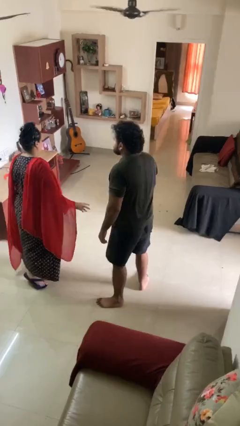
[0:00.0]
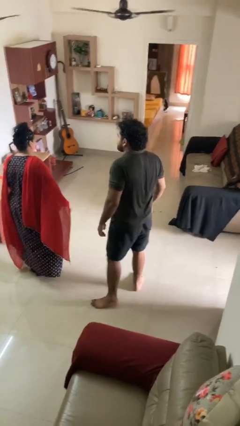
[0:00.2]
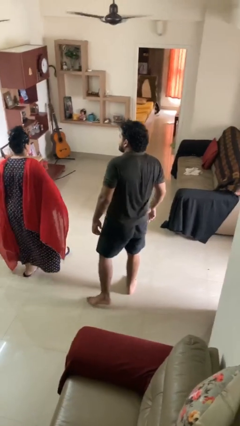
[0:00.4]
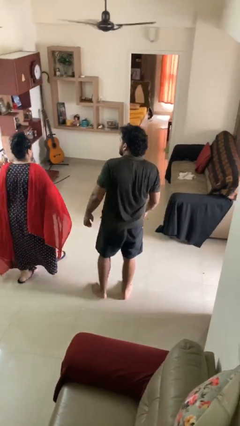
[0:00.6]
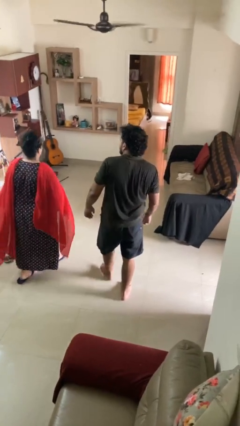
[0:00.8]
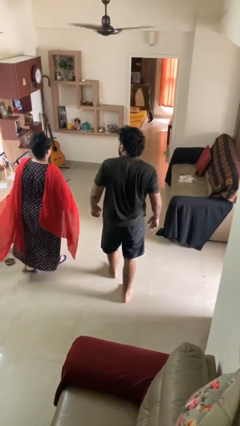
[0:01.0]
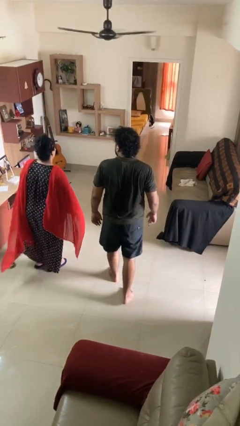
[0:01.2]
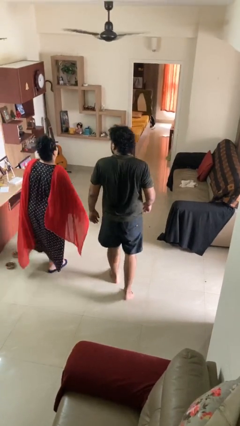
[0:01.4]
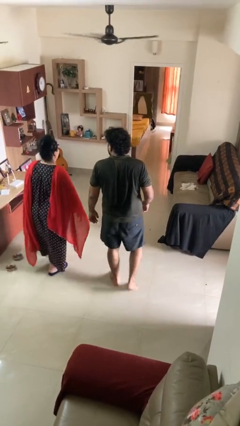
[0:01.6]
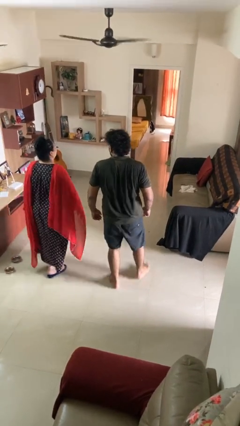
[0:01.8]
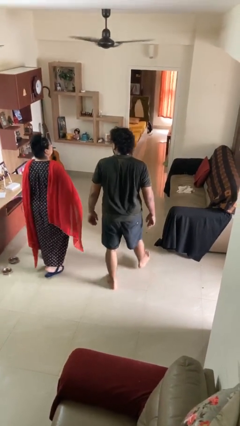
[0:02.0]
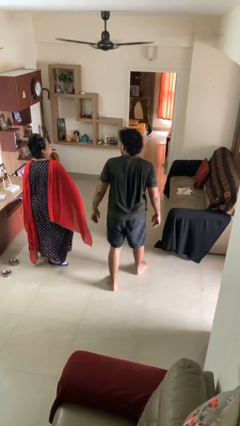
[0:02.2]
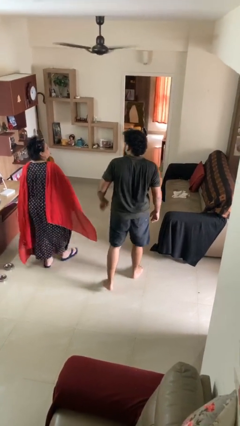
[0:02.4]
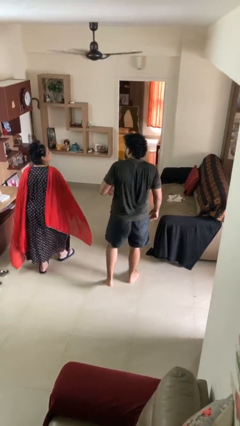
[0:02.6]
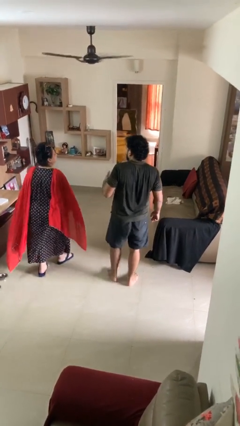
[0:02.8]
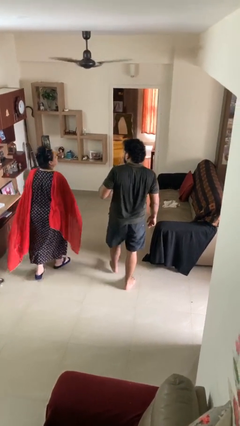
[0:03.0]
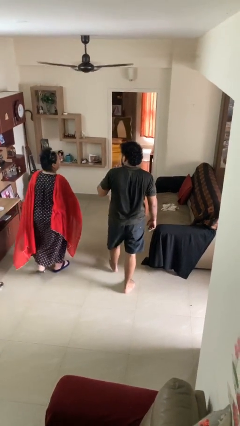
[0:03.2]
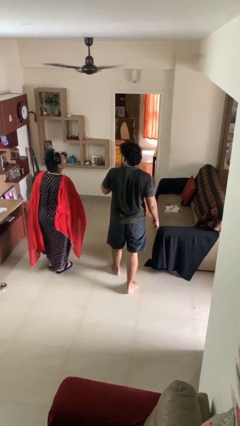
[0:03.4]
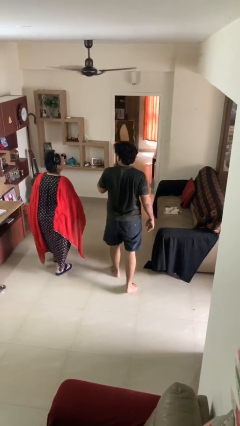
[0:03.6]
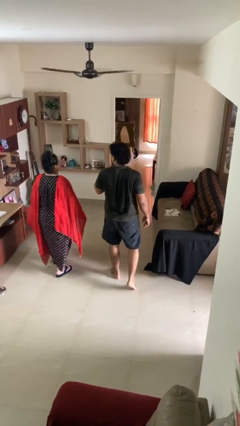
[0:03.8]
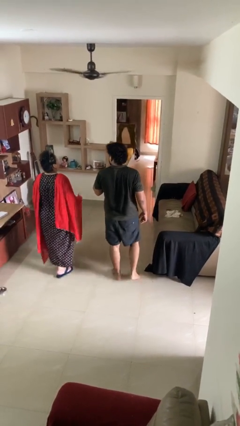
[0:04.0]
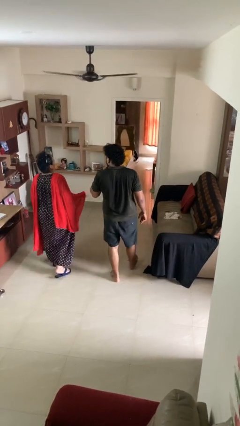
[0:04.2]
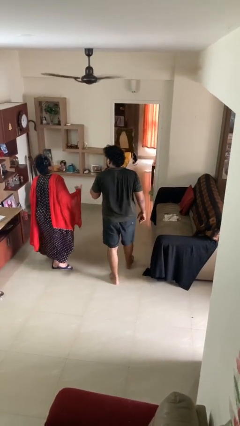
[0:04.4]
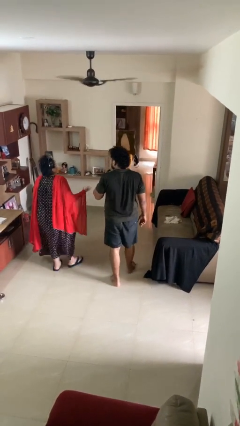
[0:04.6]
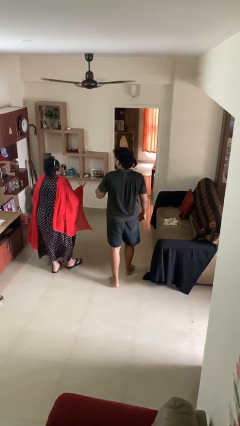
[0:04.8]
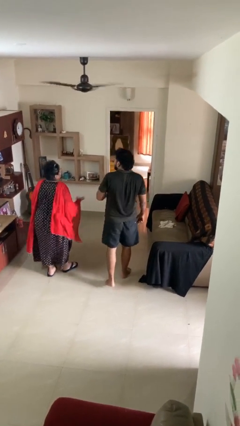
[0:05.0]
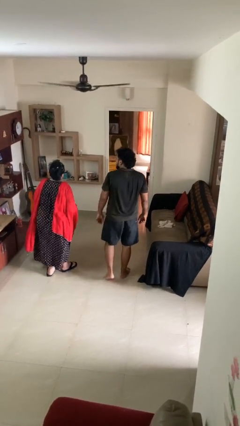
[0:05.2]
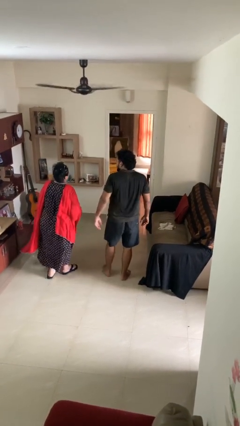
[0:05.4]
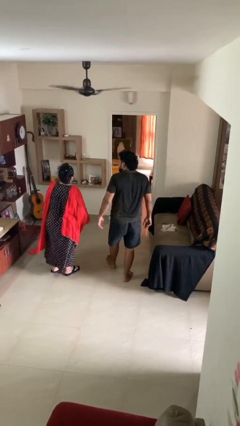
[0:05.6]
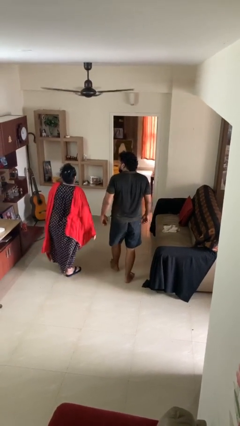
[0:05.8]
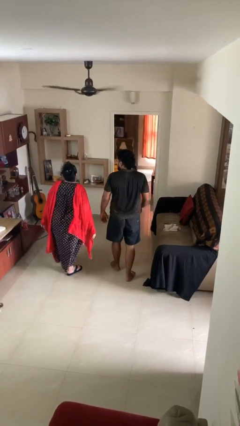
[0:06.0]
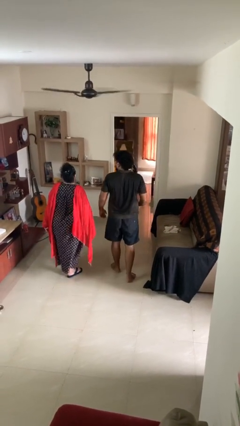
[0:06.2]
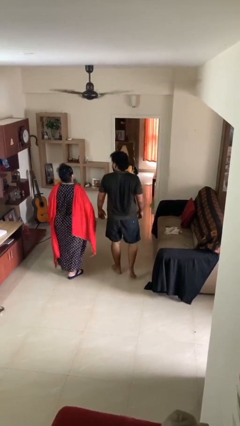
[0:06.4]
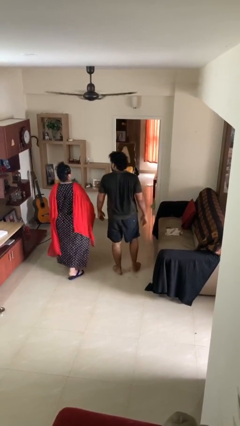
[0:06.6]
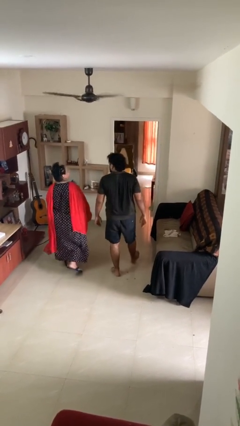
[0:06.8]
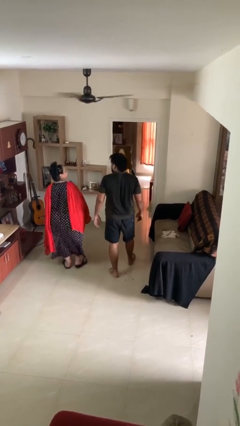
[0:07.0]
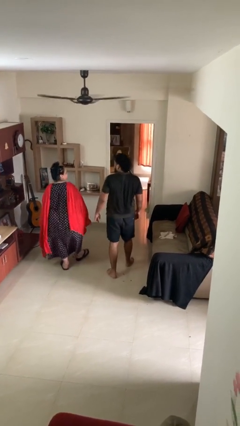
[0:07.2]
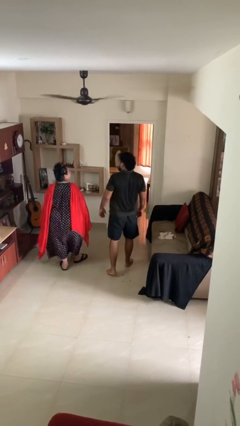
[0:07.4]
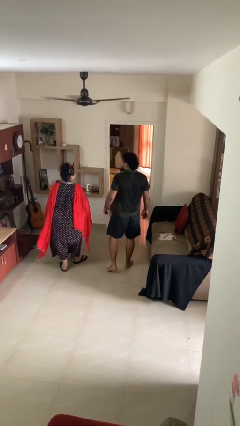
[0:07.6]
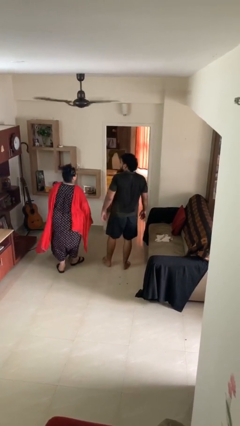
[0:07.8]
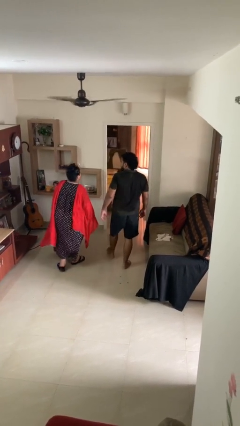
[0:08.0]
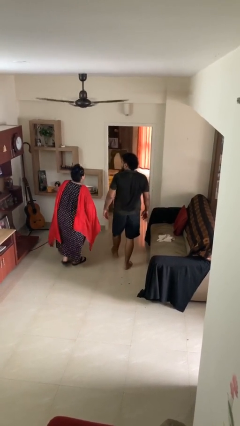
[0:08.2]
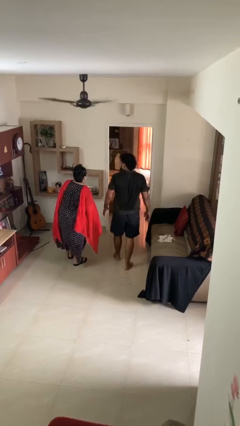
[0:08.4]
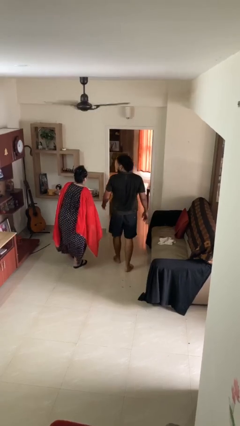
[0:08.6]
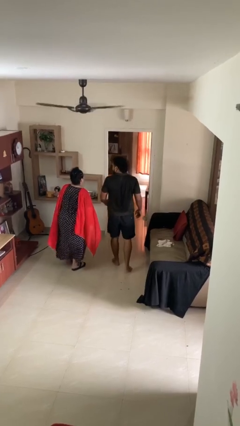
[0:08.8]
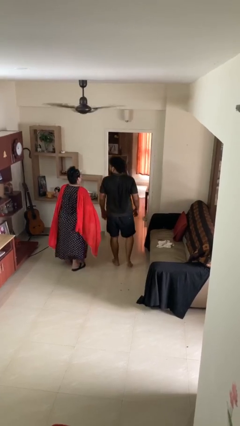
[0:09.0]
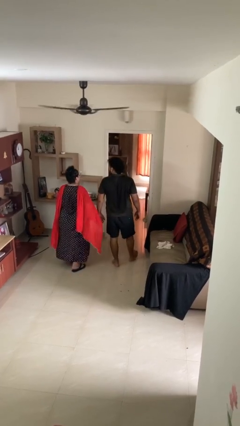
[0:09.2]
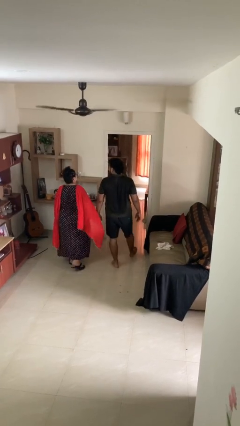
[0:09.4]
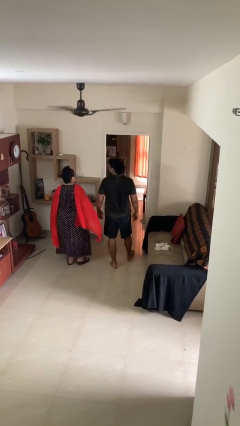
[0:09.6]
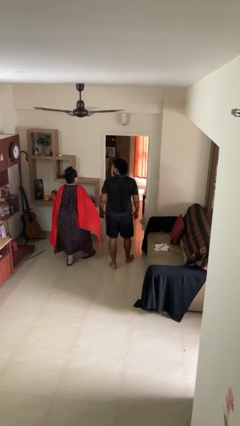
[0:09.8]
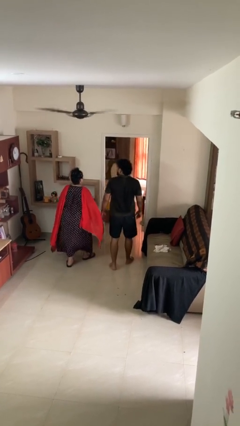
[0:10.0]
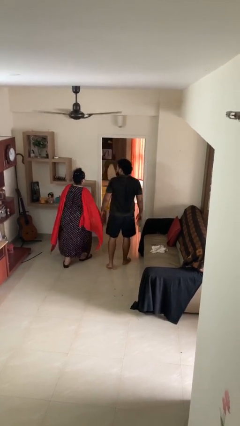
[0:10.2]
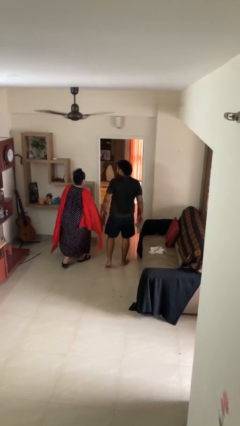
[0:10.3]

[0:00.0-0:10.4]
person talks to person

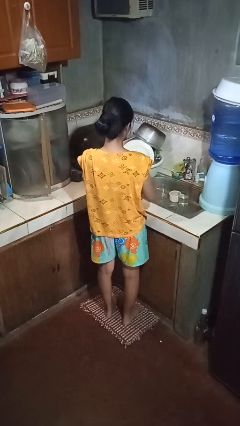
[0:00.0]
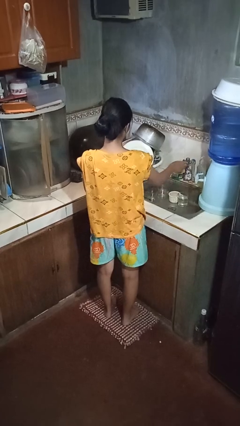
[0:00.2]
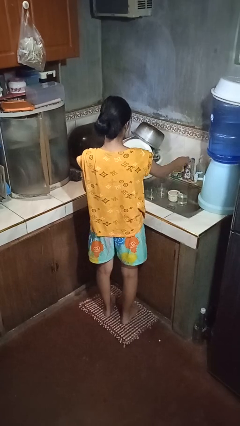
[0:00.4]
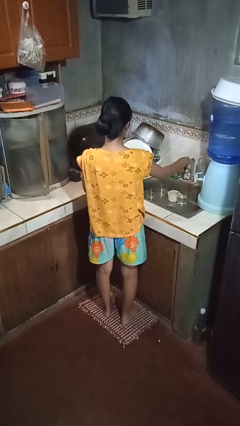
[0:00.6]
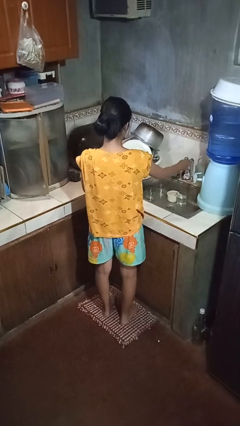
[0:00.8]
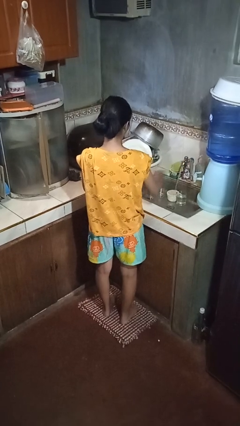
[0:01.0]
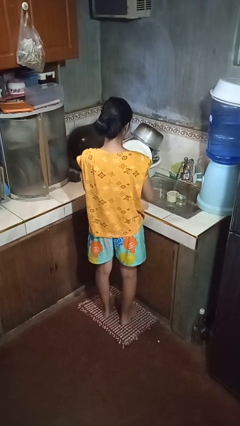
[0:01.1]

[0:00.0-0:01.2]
person turns on faucet

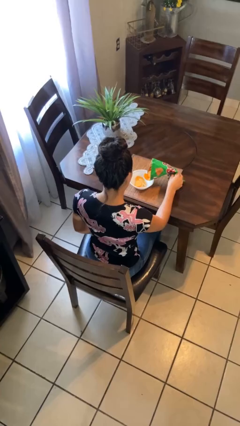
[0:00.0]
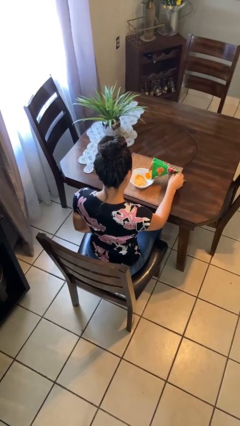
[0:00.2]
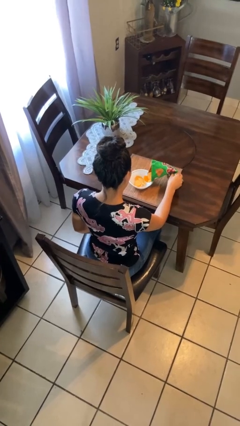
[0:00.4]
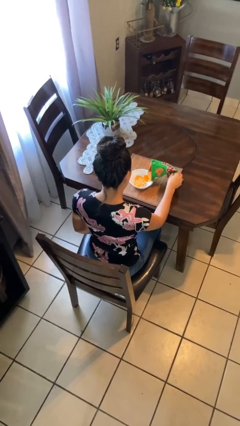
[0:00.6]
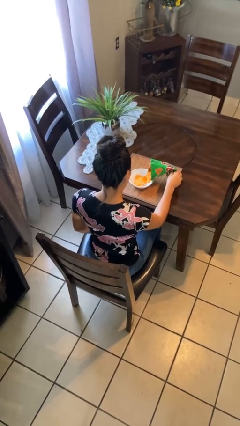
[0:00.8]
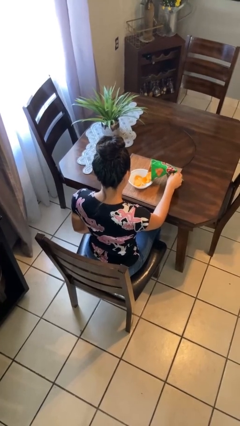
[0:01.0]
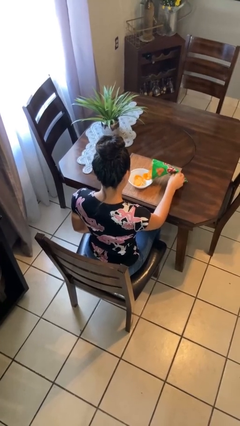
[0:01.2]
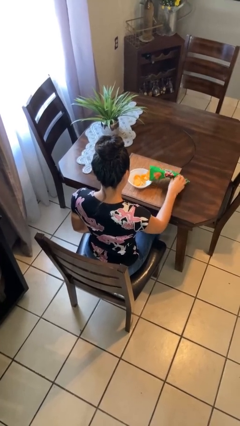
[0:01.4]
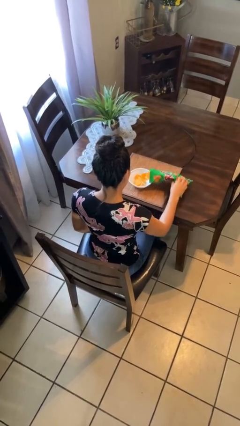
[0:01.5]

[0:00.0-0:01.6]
person pours into bowl

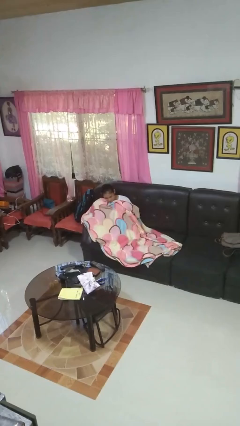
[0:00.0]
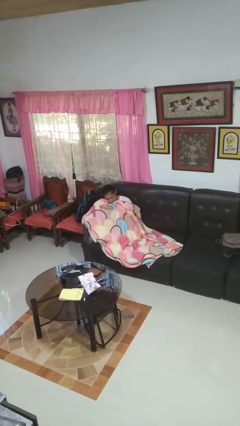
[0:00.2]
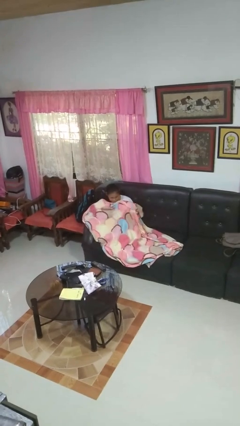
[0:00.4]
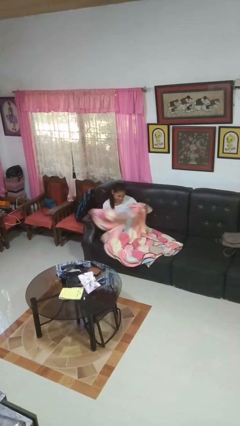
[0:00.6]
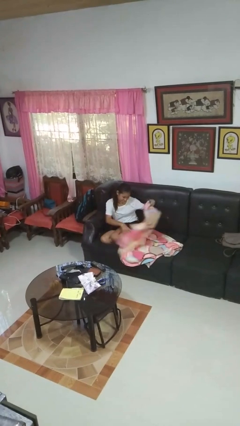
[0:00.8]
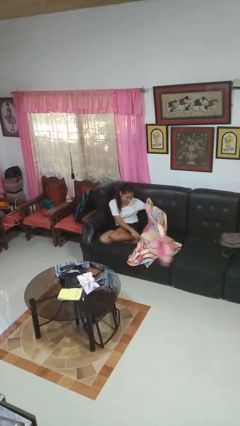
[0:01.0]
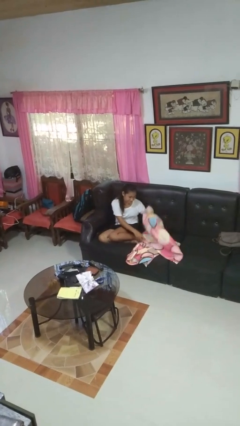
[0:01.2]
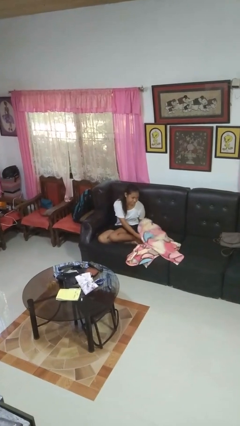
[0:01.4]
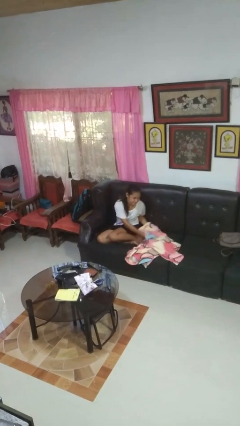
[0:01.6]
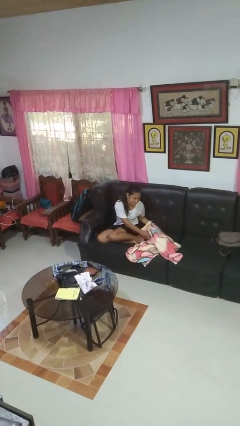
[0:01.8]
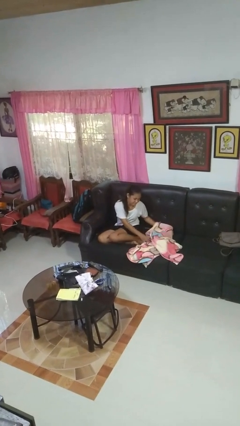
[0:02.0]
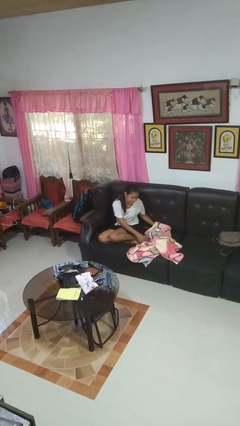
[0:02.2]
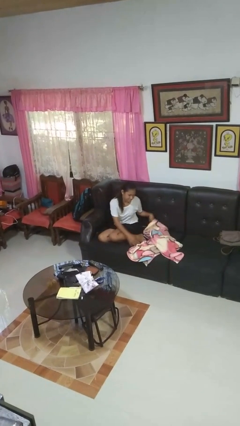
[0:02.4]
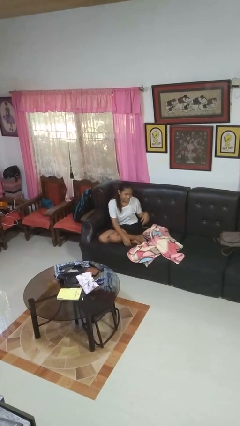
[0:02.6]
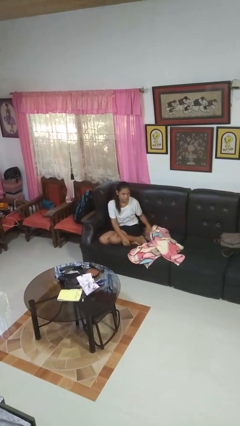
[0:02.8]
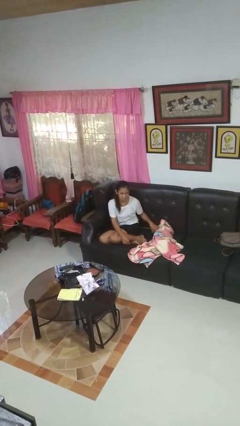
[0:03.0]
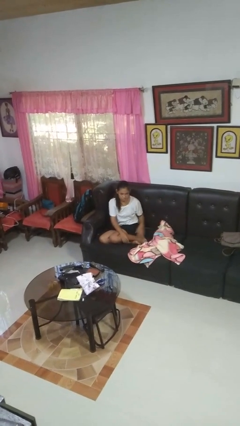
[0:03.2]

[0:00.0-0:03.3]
person uncovers with blanket

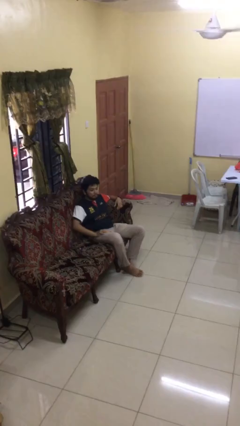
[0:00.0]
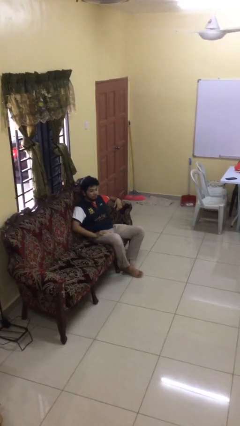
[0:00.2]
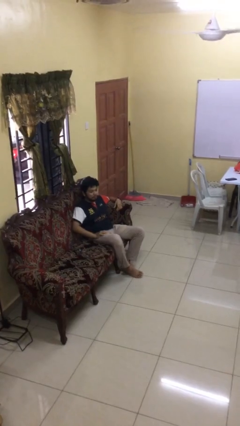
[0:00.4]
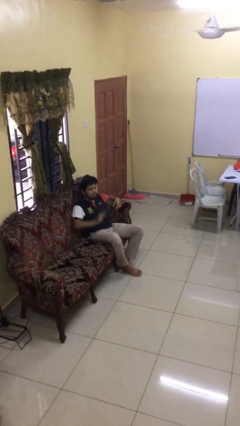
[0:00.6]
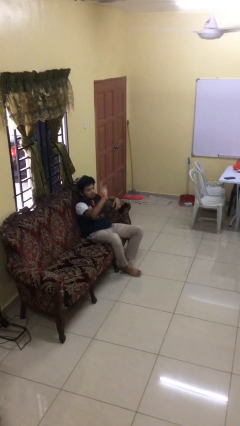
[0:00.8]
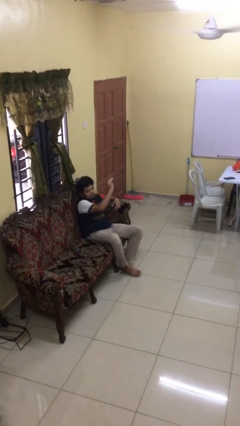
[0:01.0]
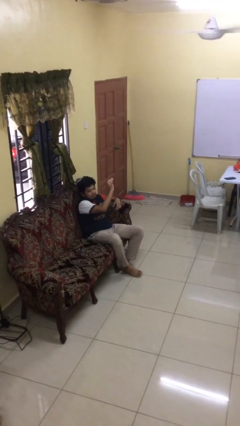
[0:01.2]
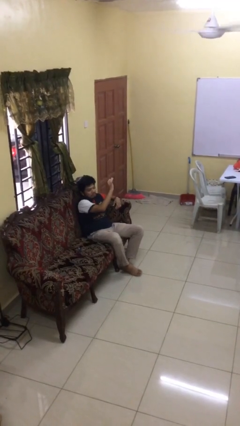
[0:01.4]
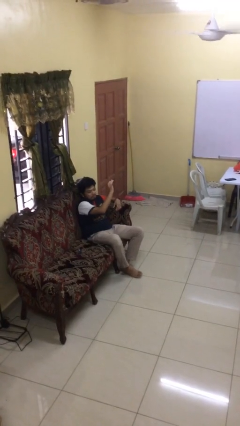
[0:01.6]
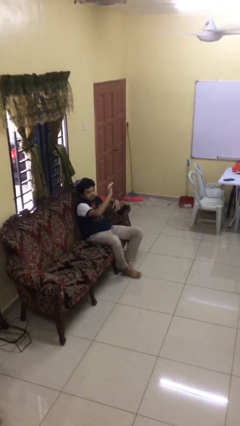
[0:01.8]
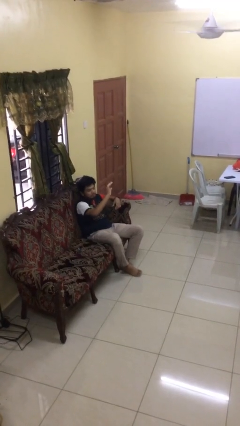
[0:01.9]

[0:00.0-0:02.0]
person gestures swipe left
